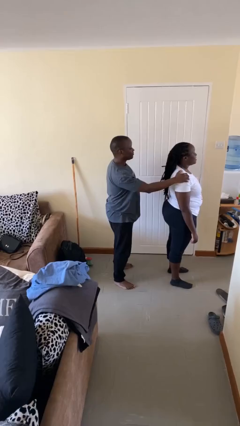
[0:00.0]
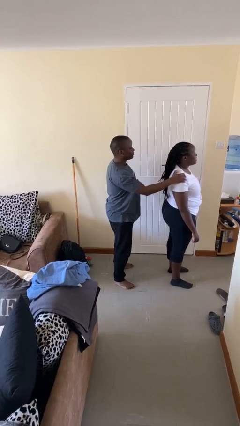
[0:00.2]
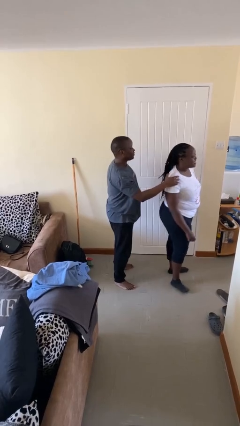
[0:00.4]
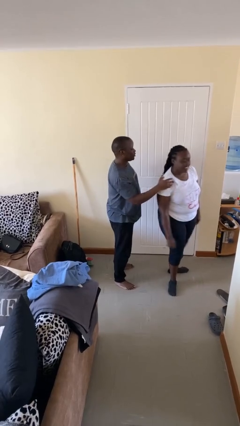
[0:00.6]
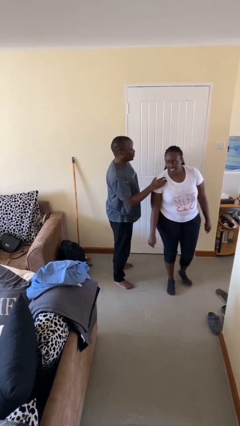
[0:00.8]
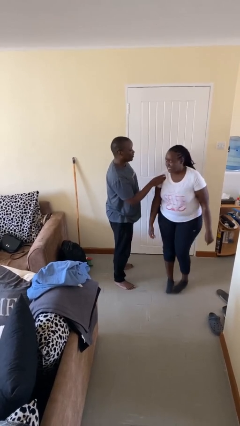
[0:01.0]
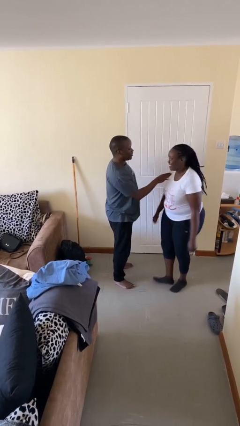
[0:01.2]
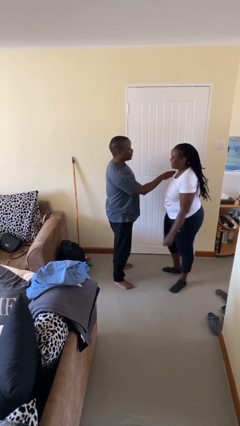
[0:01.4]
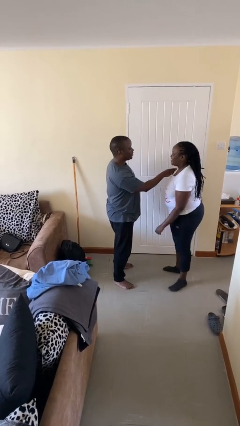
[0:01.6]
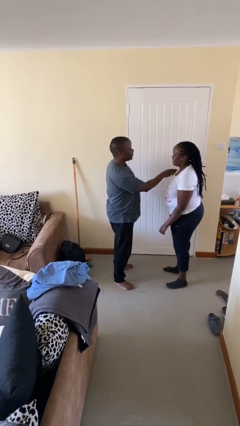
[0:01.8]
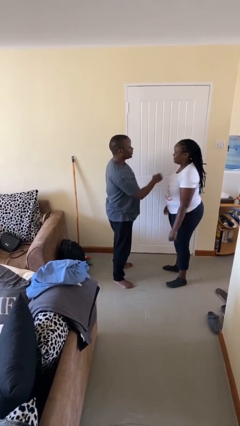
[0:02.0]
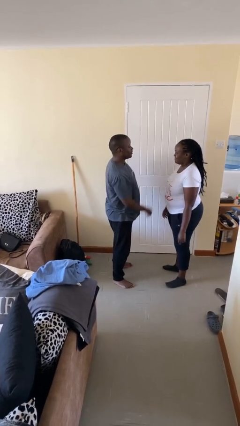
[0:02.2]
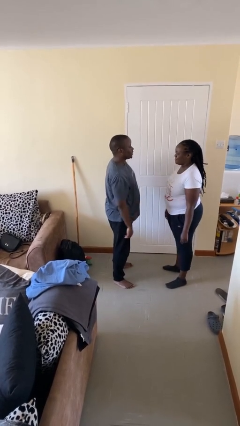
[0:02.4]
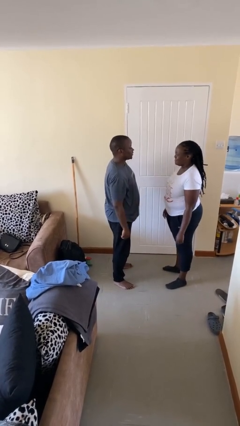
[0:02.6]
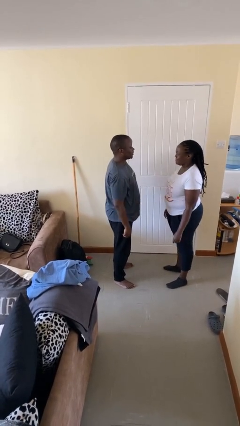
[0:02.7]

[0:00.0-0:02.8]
person spins person around

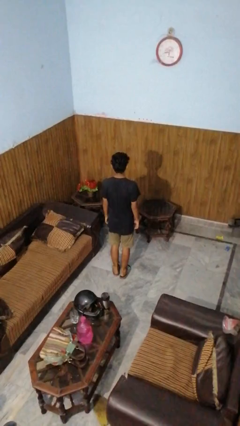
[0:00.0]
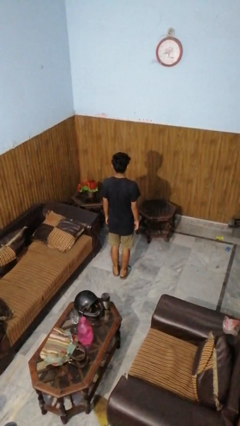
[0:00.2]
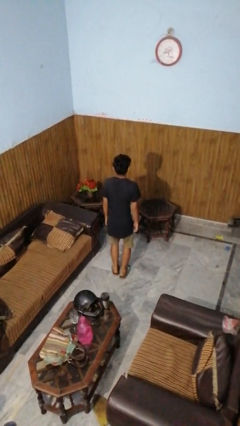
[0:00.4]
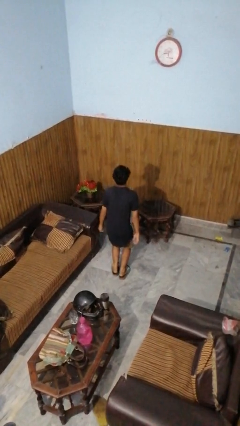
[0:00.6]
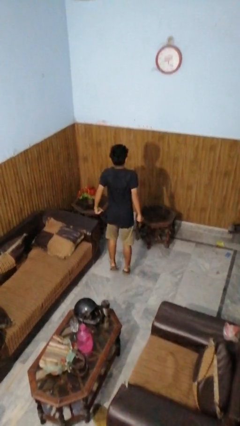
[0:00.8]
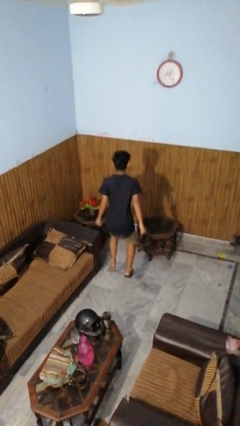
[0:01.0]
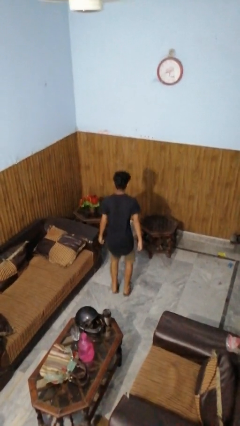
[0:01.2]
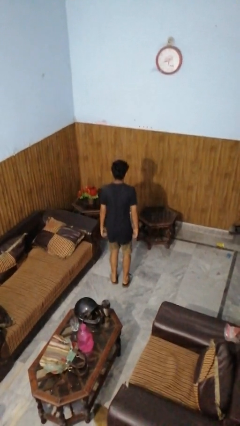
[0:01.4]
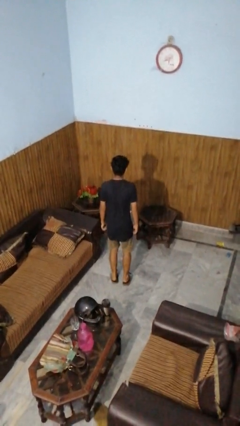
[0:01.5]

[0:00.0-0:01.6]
person jumps

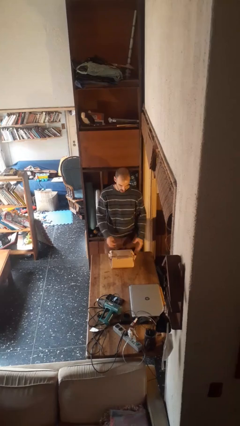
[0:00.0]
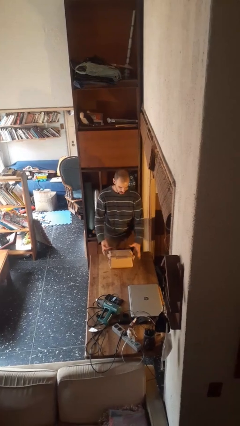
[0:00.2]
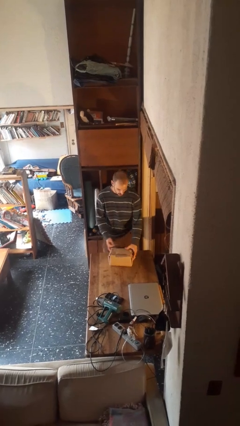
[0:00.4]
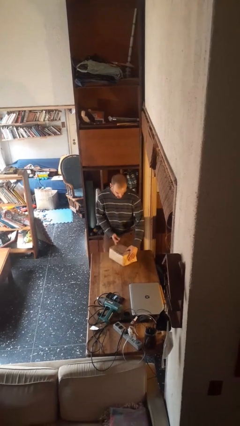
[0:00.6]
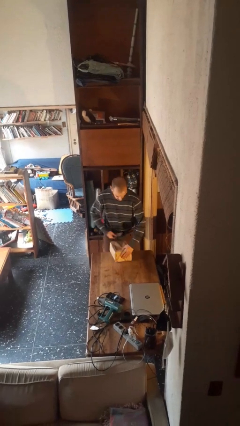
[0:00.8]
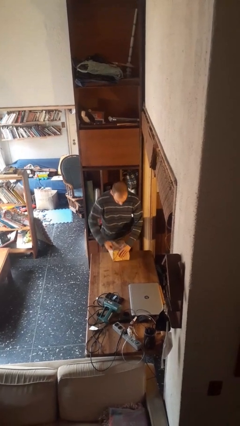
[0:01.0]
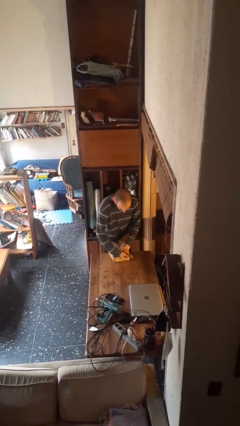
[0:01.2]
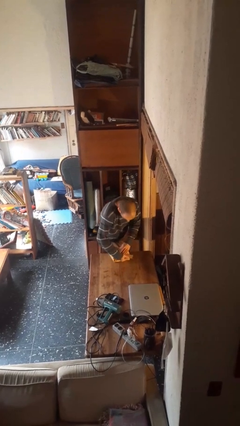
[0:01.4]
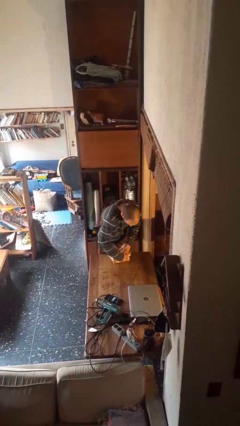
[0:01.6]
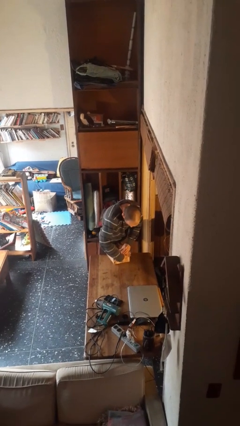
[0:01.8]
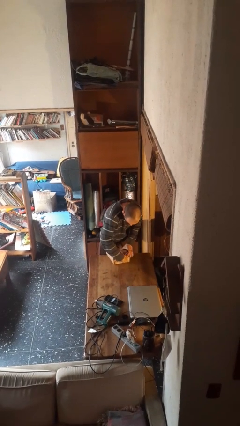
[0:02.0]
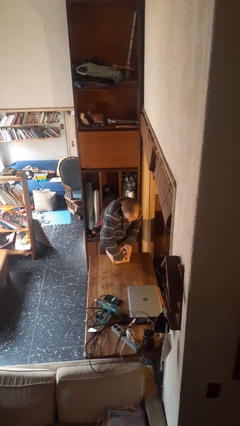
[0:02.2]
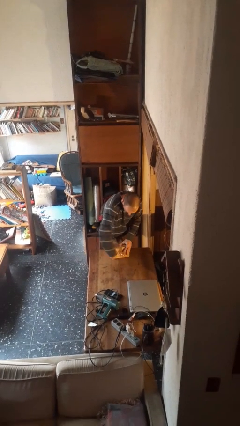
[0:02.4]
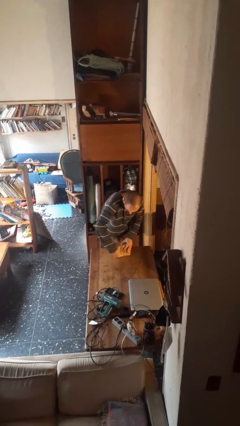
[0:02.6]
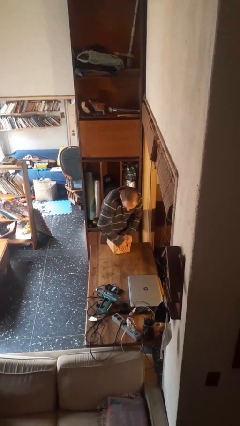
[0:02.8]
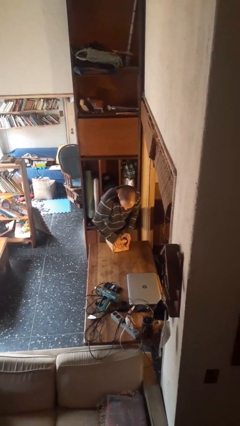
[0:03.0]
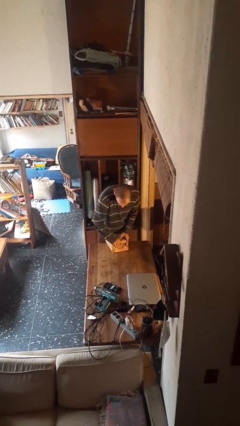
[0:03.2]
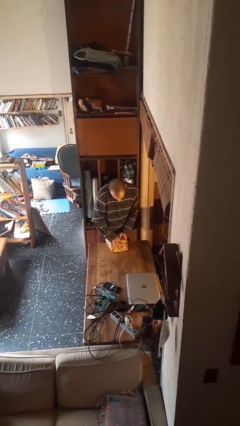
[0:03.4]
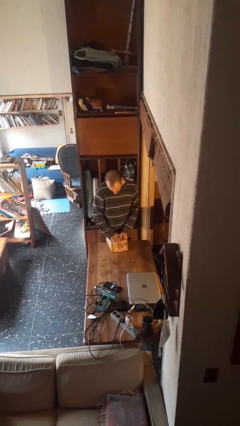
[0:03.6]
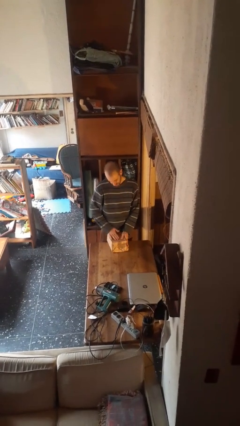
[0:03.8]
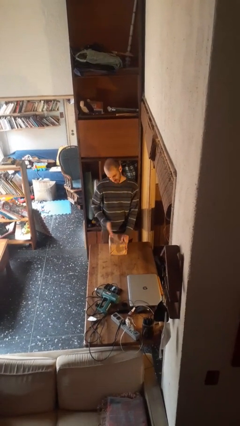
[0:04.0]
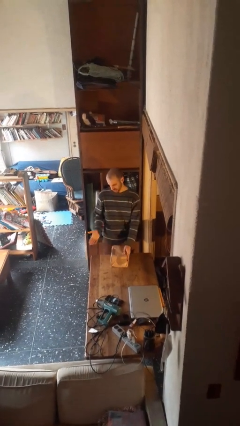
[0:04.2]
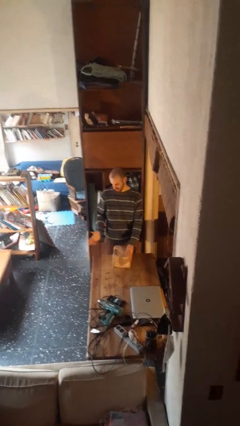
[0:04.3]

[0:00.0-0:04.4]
person wraps box

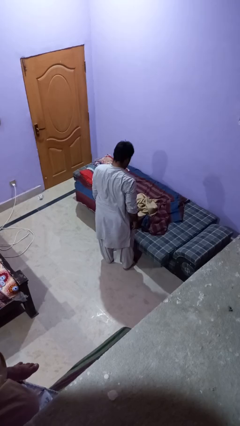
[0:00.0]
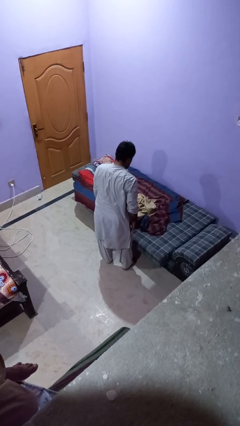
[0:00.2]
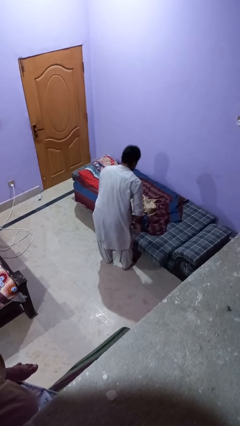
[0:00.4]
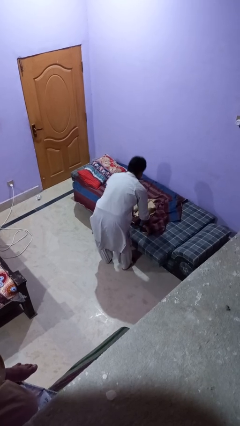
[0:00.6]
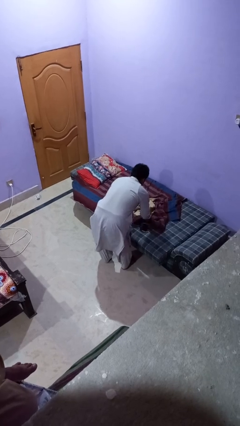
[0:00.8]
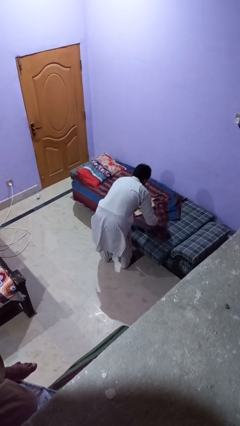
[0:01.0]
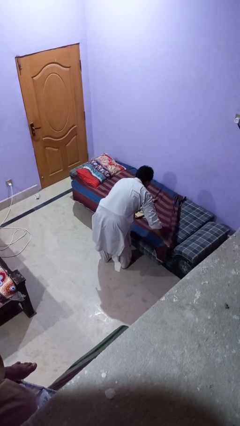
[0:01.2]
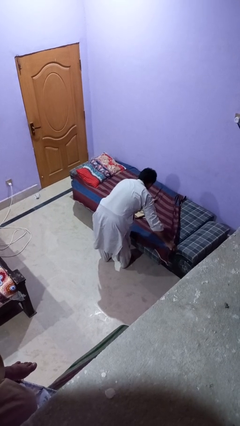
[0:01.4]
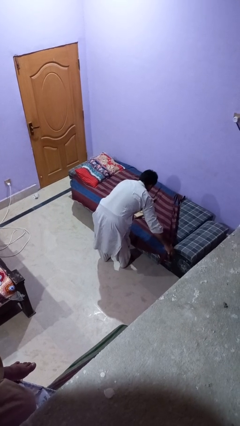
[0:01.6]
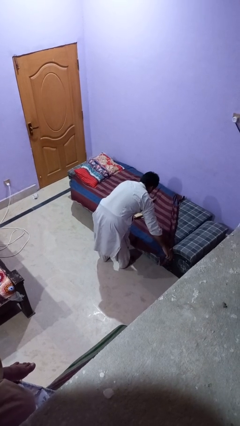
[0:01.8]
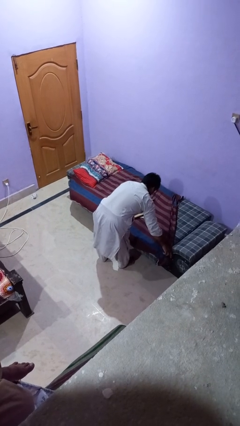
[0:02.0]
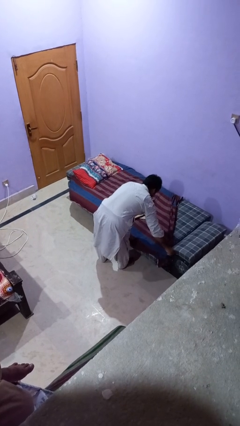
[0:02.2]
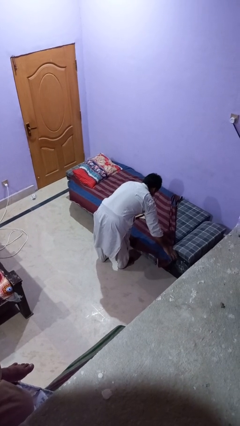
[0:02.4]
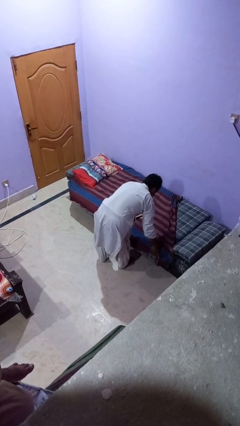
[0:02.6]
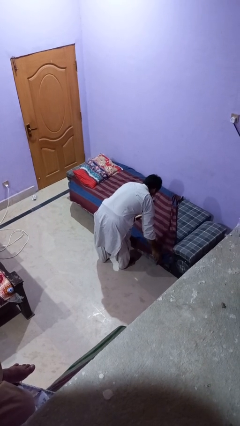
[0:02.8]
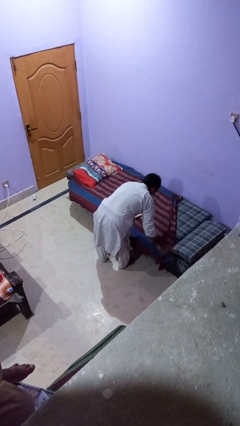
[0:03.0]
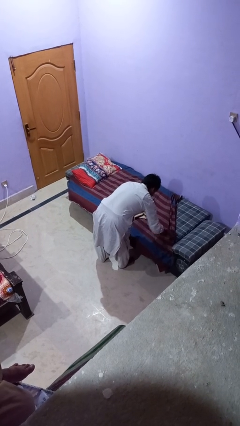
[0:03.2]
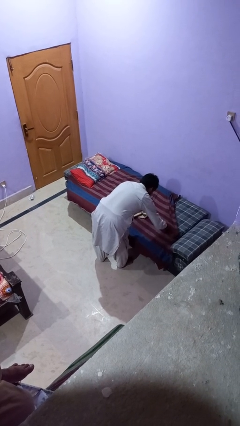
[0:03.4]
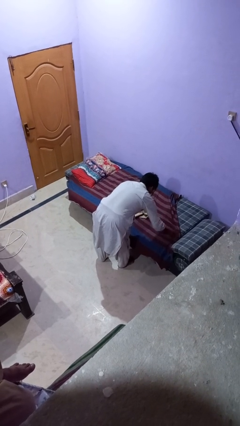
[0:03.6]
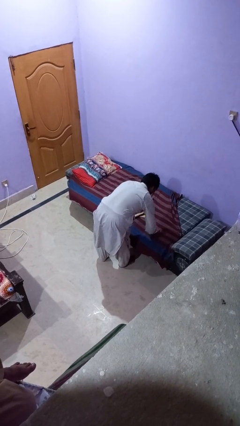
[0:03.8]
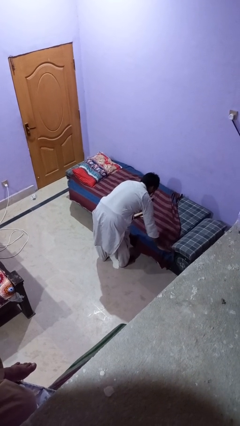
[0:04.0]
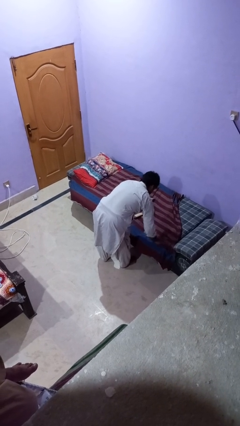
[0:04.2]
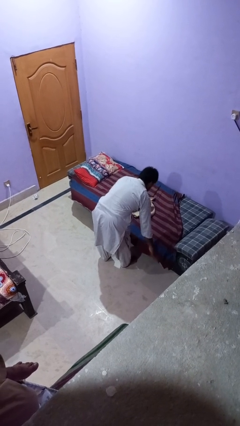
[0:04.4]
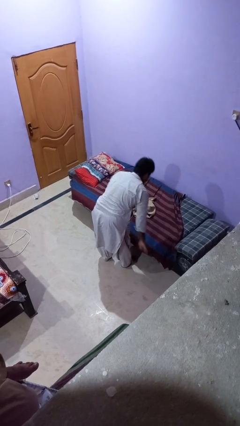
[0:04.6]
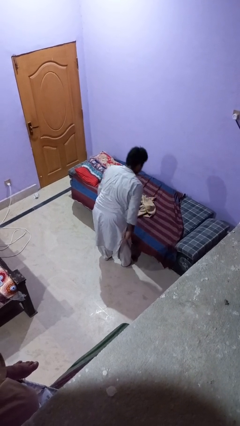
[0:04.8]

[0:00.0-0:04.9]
person makes bed

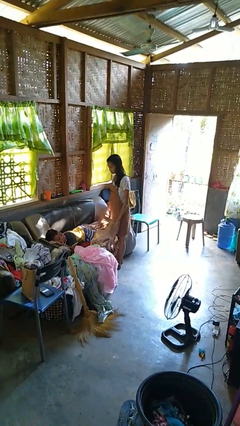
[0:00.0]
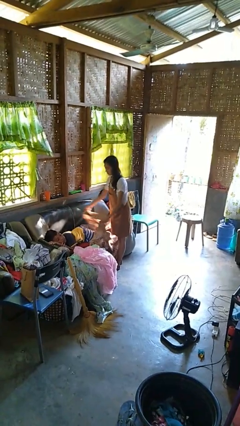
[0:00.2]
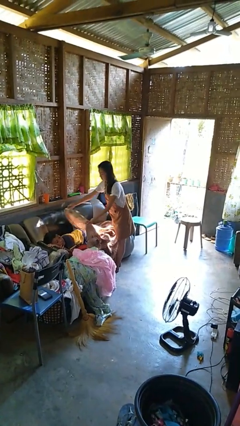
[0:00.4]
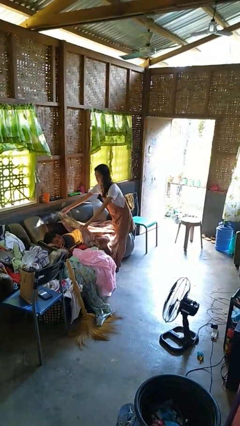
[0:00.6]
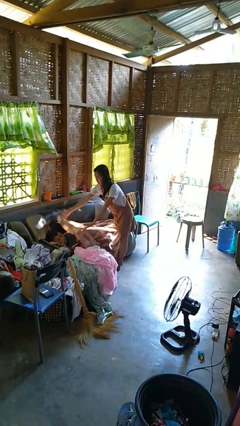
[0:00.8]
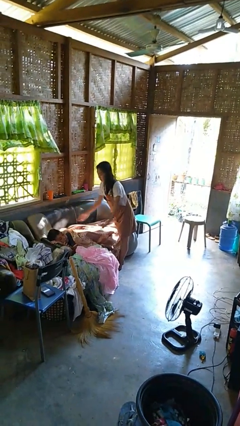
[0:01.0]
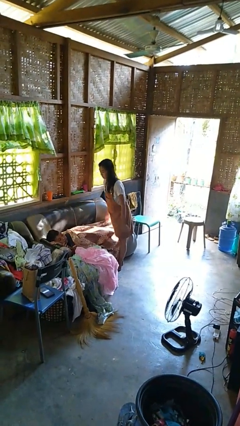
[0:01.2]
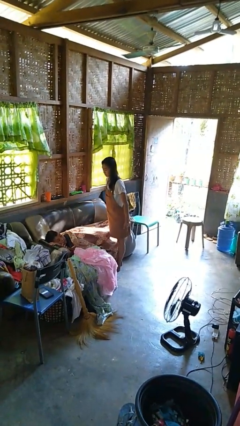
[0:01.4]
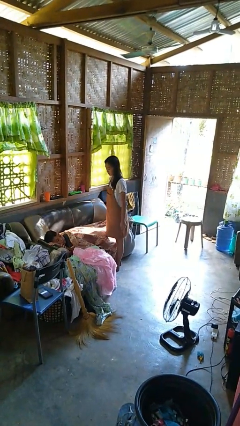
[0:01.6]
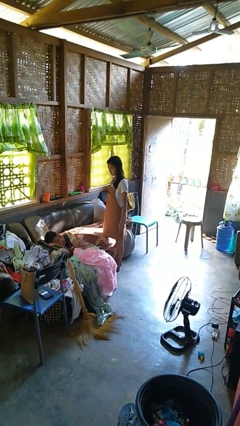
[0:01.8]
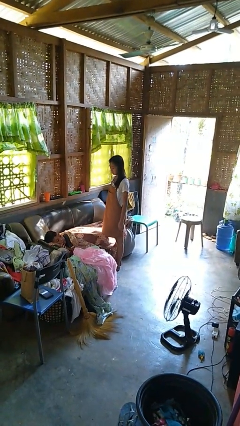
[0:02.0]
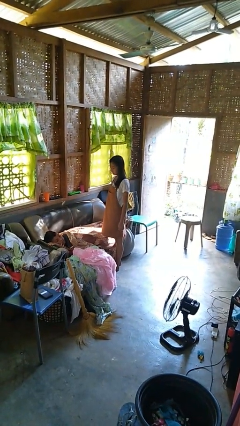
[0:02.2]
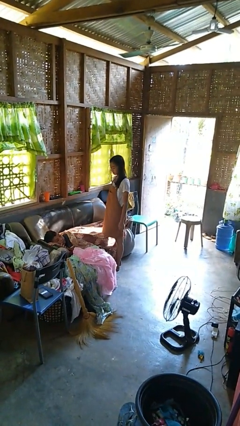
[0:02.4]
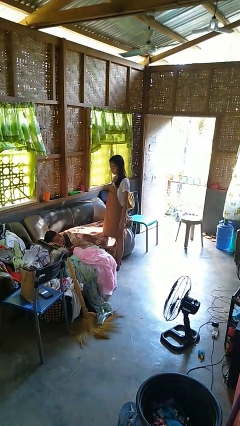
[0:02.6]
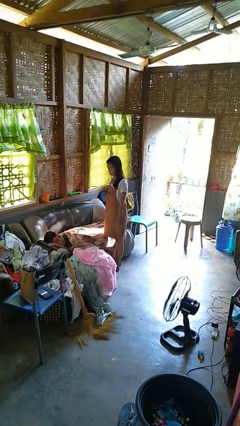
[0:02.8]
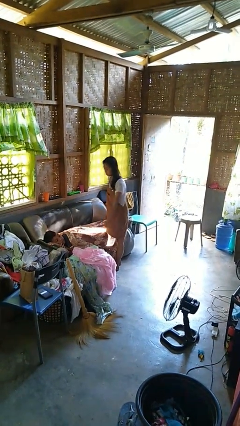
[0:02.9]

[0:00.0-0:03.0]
person covers friend with blanket

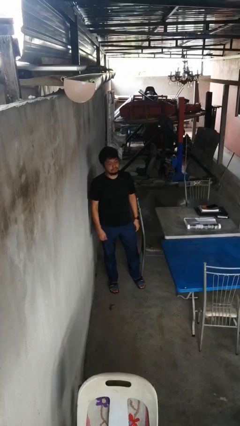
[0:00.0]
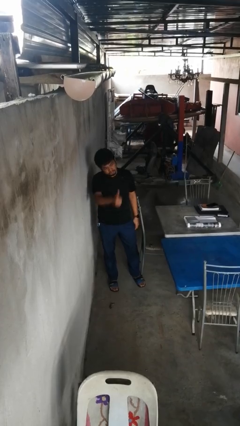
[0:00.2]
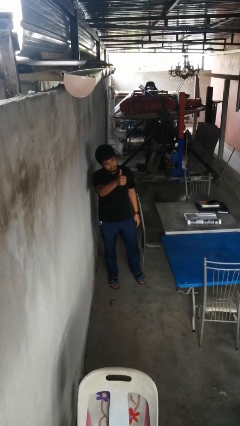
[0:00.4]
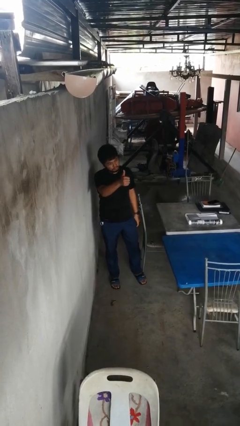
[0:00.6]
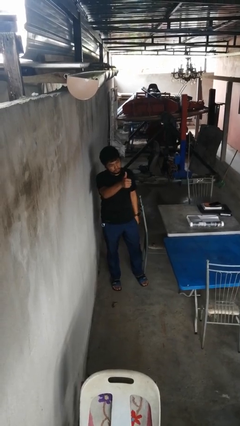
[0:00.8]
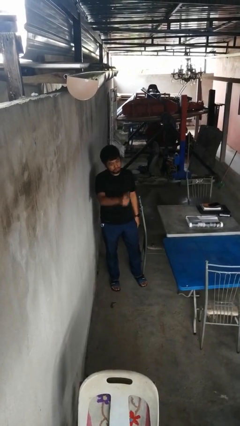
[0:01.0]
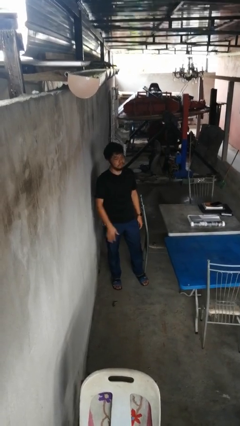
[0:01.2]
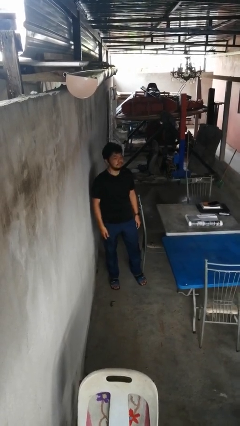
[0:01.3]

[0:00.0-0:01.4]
person gestures thumbs up
